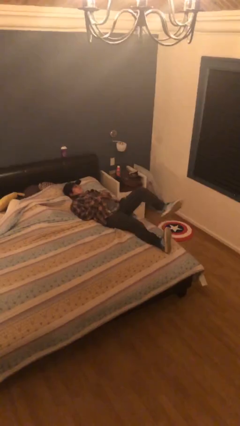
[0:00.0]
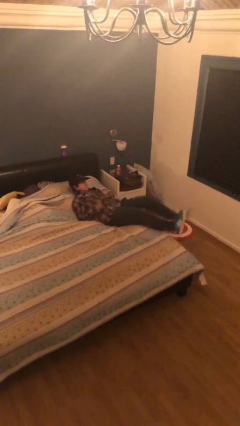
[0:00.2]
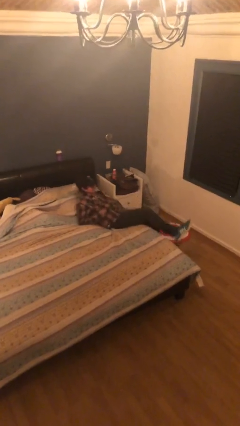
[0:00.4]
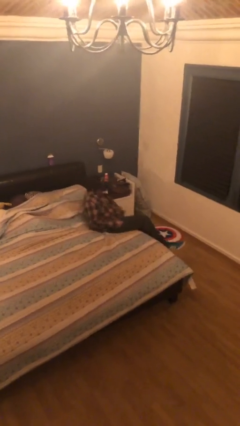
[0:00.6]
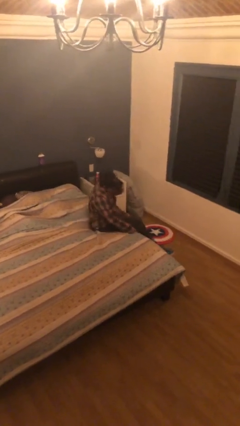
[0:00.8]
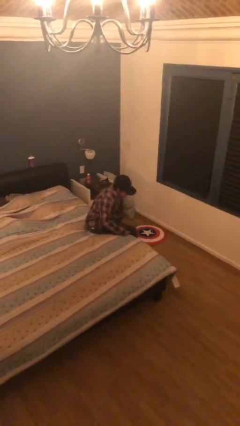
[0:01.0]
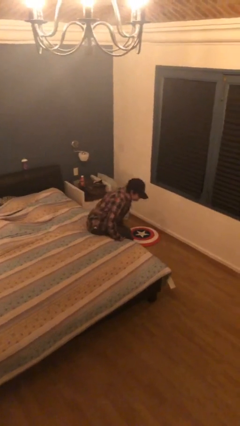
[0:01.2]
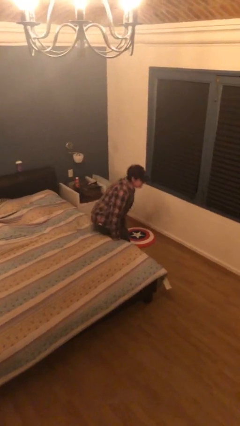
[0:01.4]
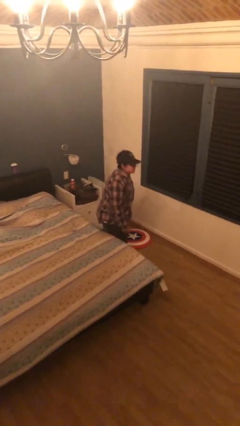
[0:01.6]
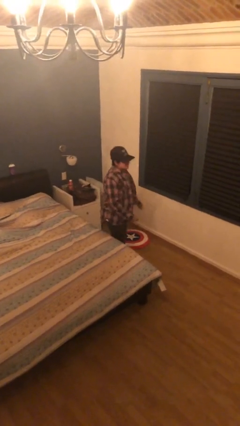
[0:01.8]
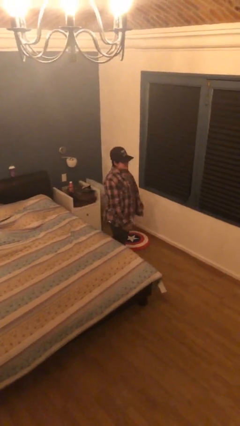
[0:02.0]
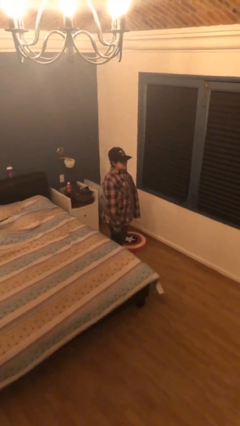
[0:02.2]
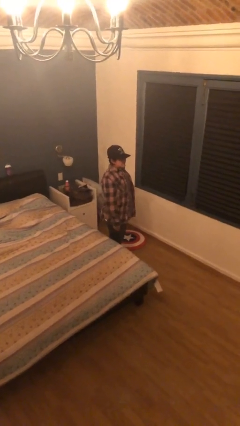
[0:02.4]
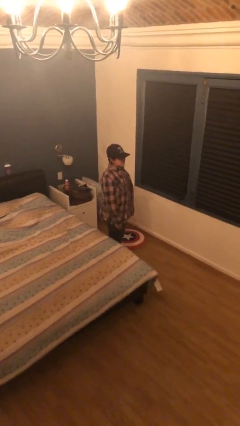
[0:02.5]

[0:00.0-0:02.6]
person stands up

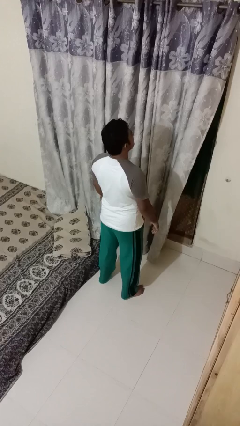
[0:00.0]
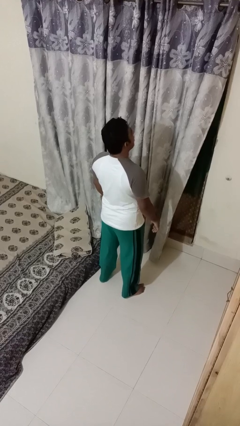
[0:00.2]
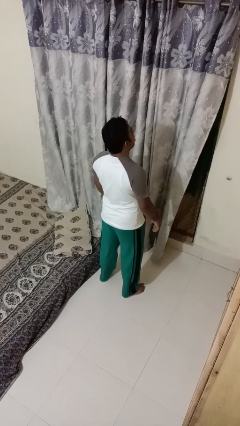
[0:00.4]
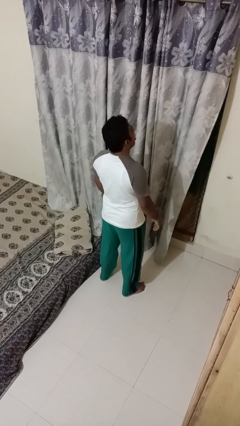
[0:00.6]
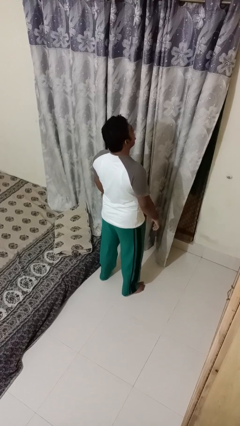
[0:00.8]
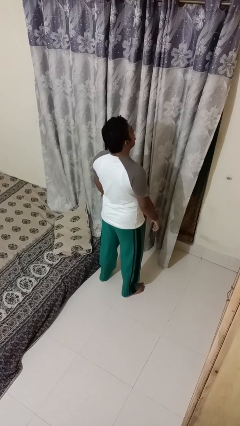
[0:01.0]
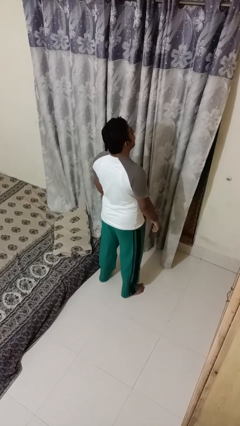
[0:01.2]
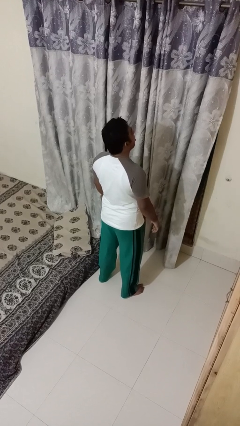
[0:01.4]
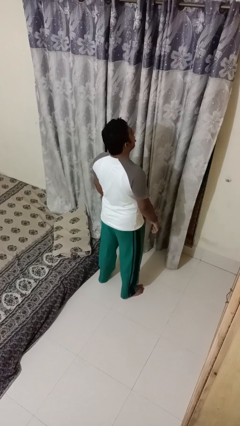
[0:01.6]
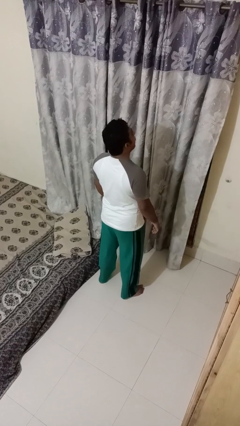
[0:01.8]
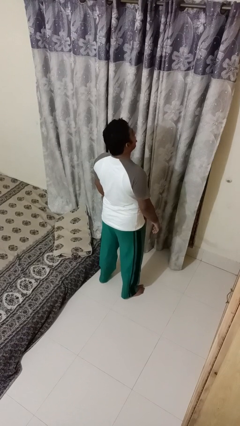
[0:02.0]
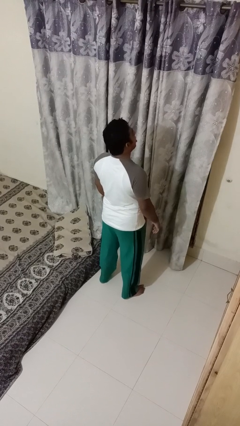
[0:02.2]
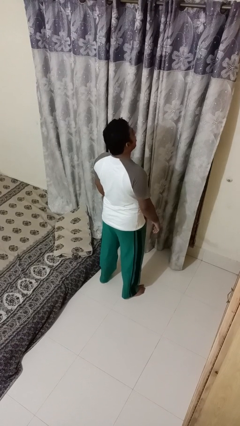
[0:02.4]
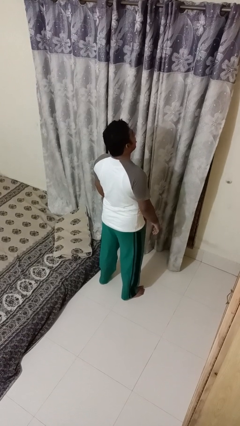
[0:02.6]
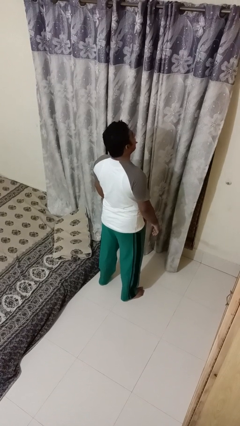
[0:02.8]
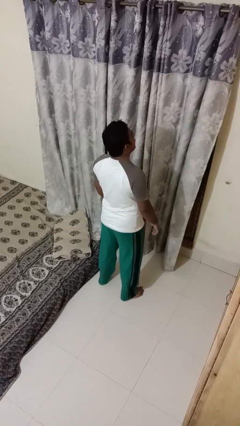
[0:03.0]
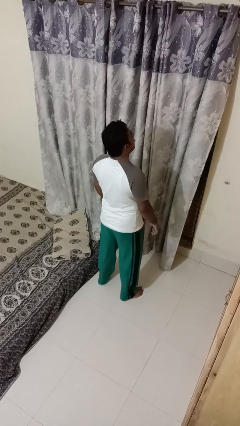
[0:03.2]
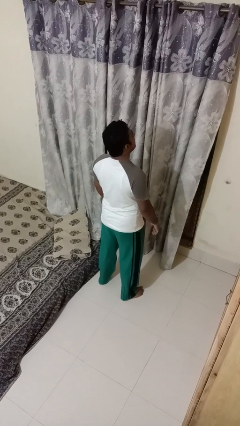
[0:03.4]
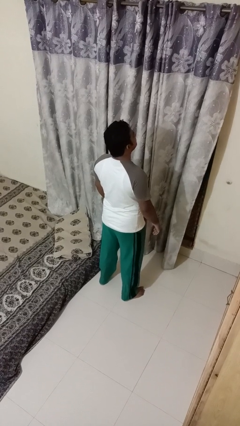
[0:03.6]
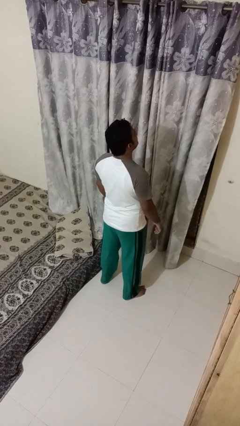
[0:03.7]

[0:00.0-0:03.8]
person sticks out tongue

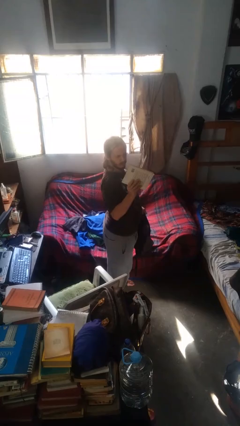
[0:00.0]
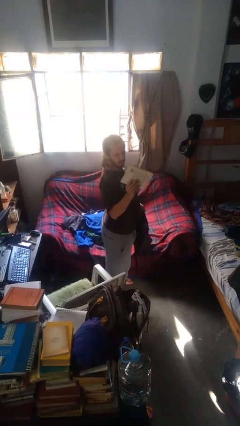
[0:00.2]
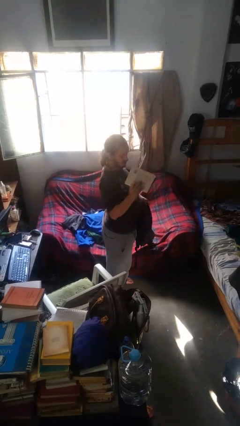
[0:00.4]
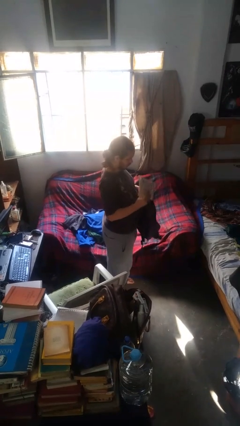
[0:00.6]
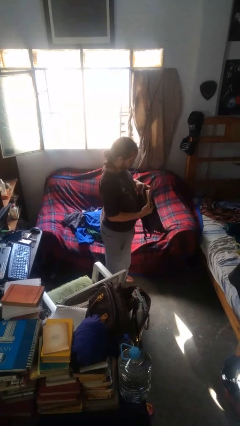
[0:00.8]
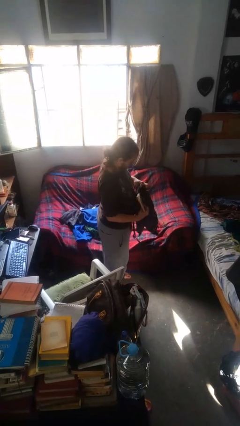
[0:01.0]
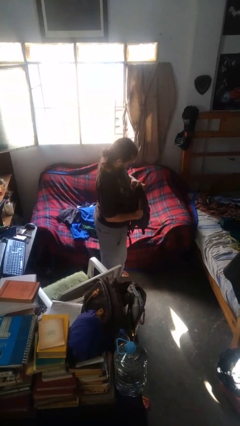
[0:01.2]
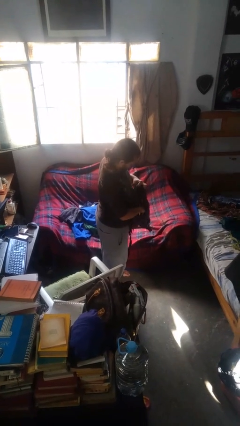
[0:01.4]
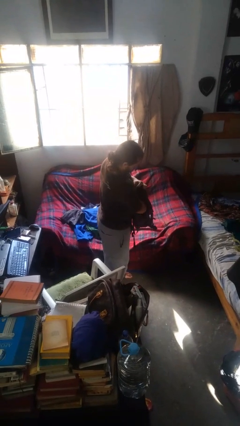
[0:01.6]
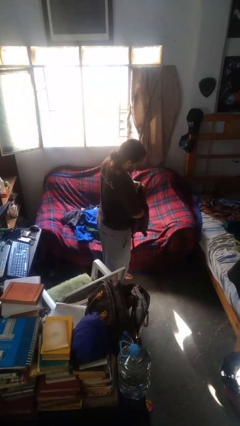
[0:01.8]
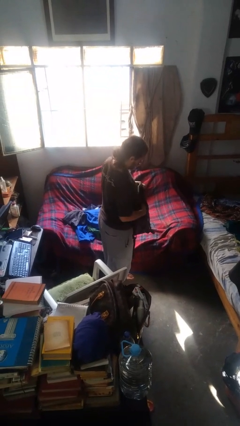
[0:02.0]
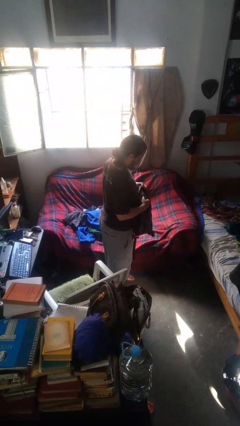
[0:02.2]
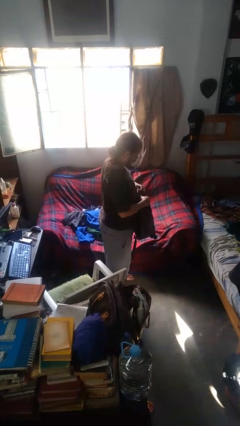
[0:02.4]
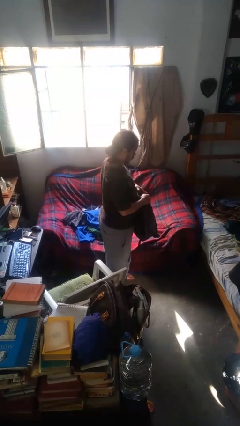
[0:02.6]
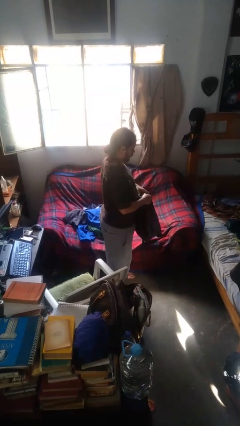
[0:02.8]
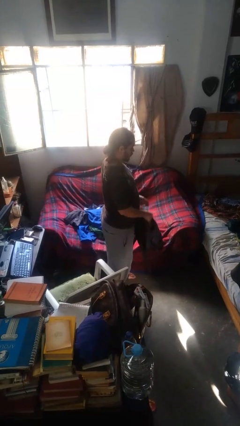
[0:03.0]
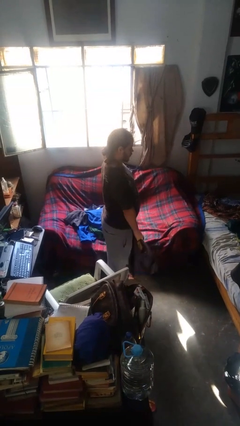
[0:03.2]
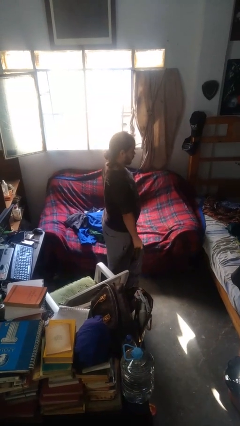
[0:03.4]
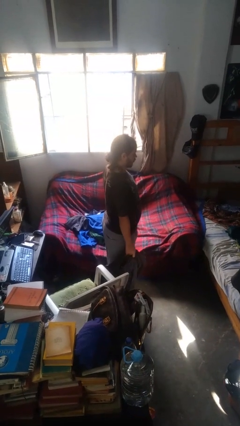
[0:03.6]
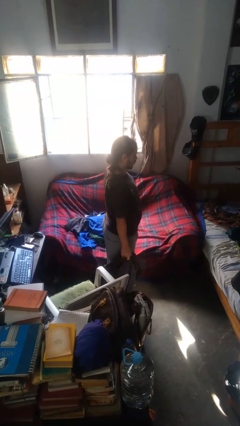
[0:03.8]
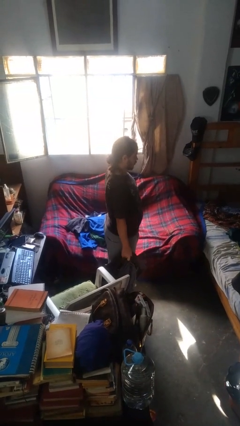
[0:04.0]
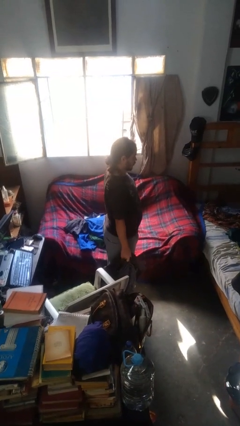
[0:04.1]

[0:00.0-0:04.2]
person puts object into backpack

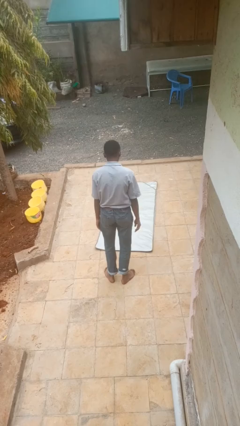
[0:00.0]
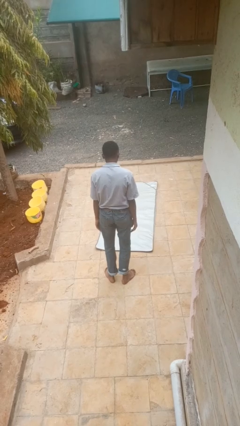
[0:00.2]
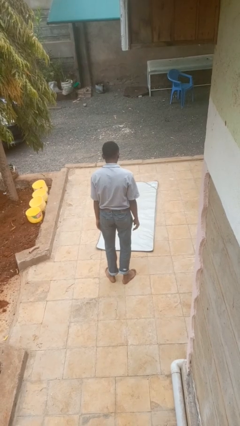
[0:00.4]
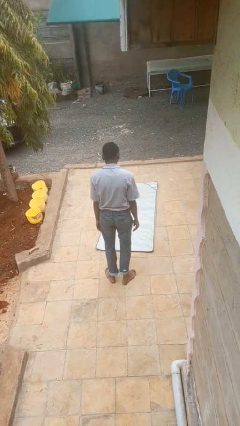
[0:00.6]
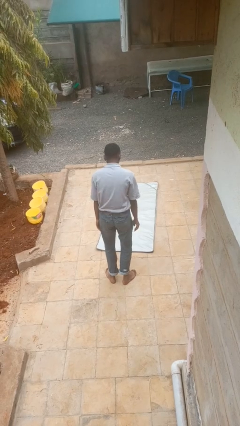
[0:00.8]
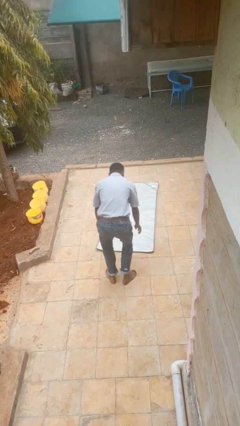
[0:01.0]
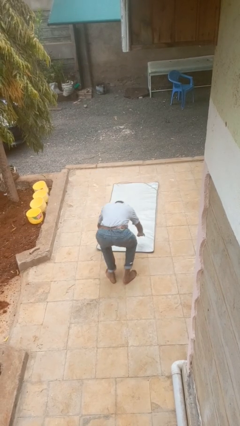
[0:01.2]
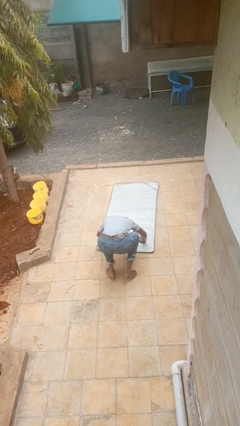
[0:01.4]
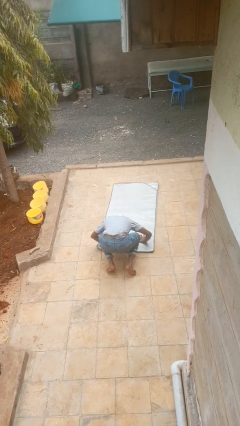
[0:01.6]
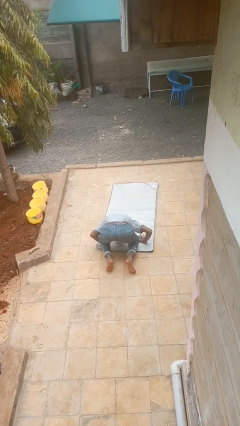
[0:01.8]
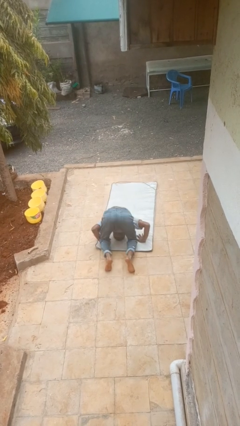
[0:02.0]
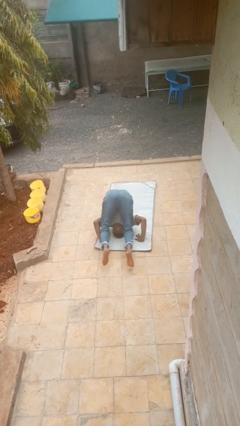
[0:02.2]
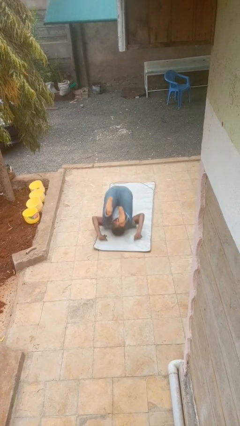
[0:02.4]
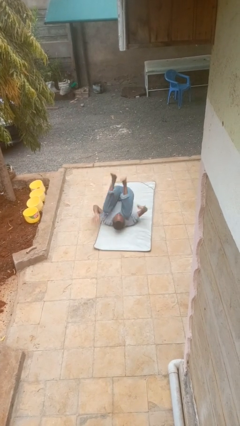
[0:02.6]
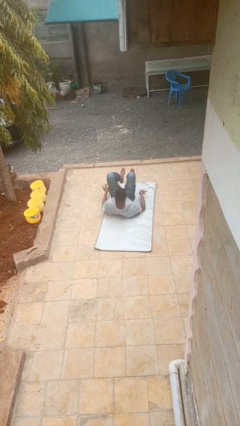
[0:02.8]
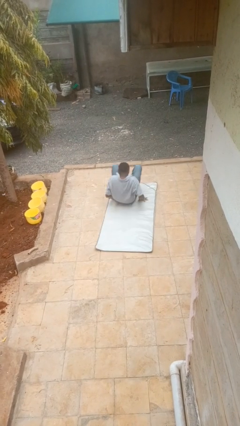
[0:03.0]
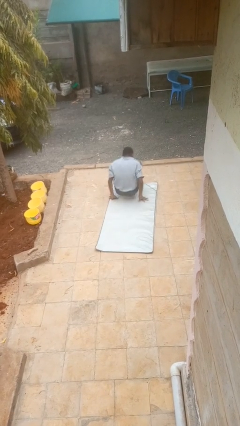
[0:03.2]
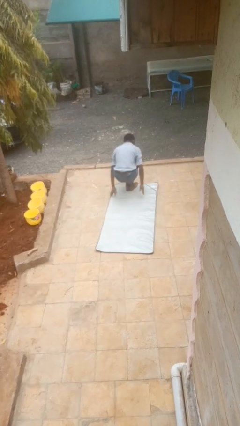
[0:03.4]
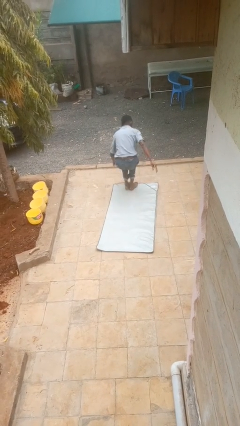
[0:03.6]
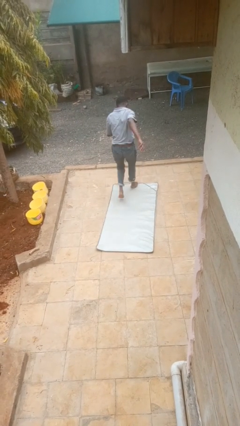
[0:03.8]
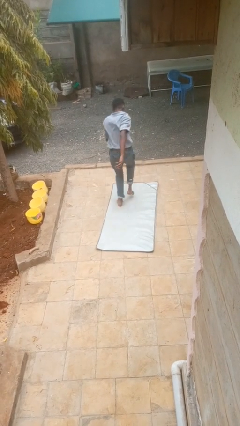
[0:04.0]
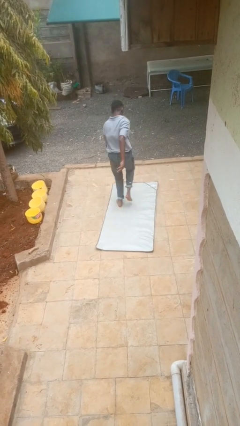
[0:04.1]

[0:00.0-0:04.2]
person somersaults

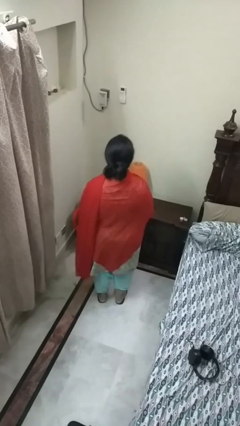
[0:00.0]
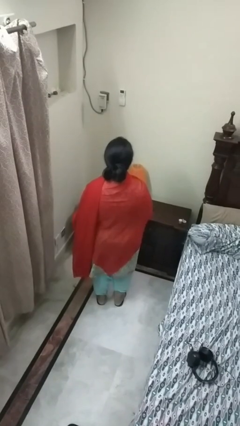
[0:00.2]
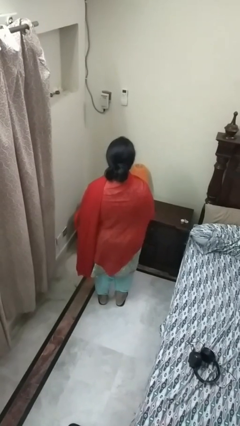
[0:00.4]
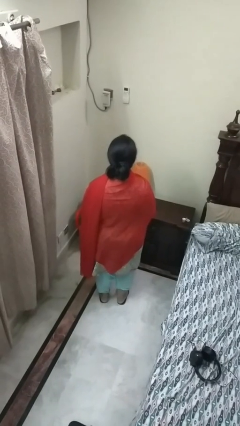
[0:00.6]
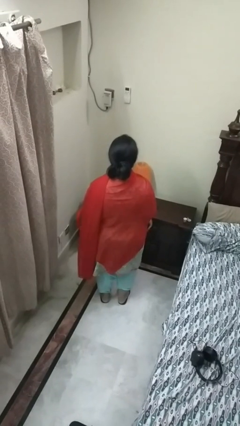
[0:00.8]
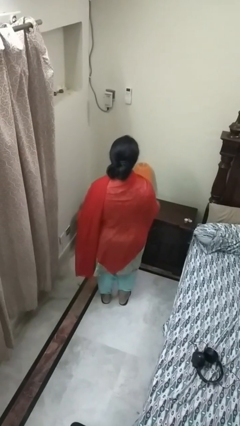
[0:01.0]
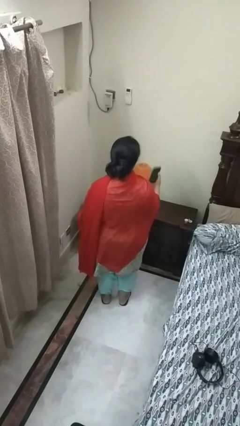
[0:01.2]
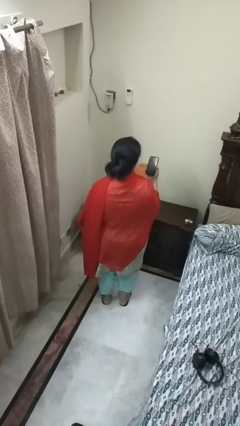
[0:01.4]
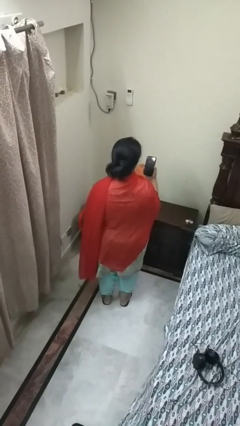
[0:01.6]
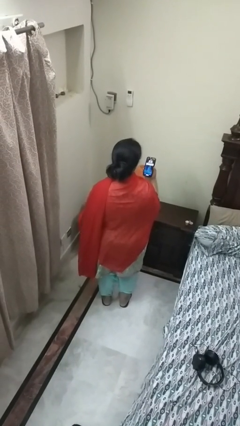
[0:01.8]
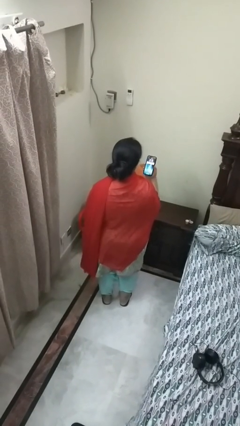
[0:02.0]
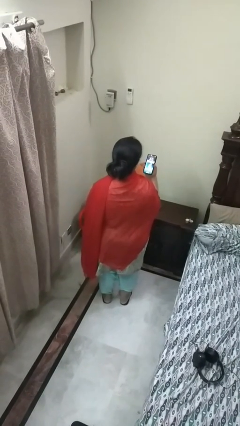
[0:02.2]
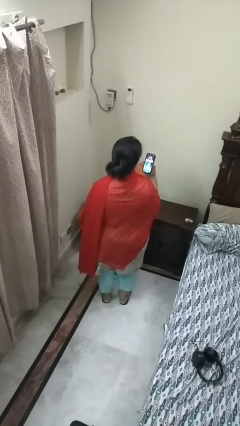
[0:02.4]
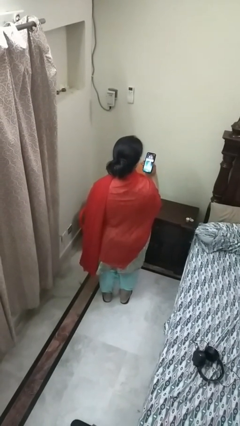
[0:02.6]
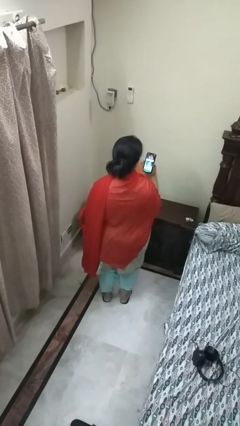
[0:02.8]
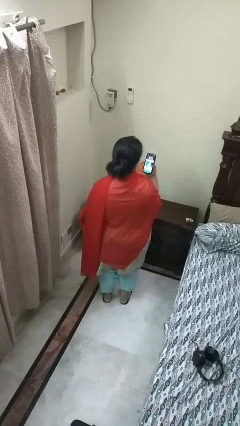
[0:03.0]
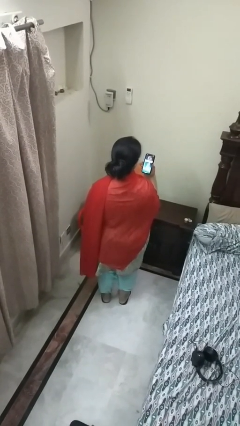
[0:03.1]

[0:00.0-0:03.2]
person takes phone from pocket
